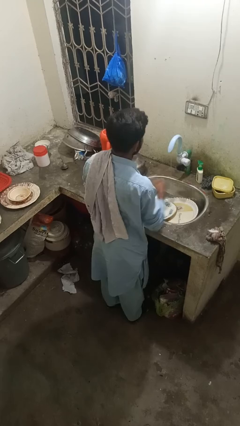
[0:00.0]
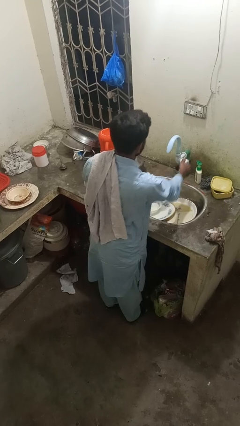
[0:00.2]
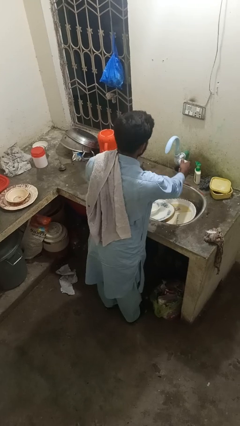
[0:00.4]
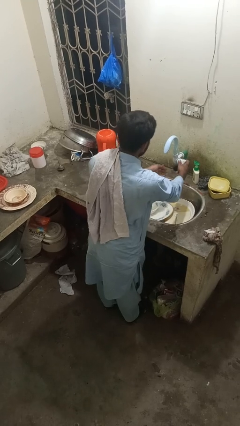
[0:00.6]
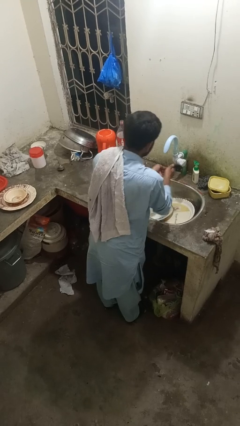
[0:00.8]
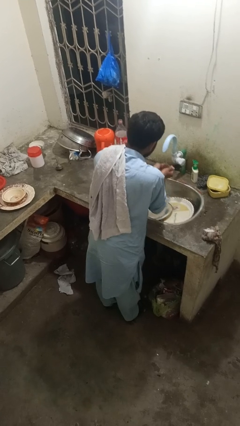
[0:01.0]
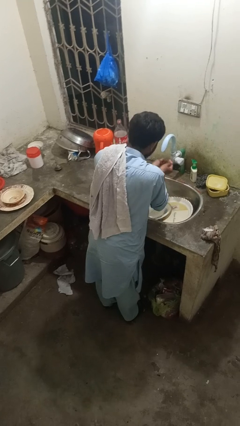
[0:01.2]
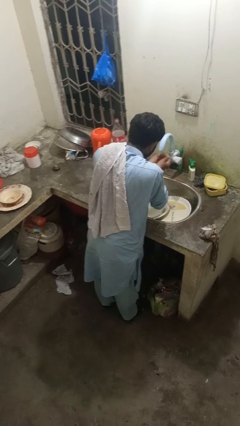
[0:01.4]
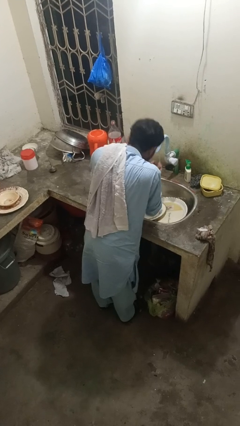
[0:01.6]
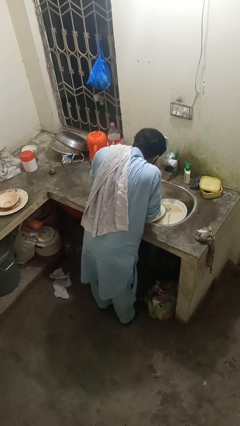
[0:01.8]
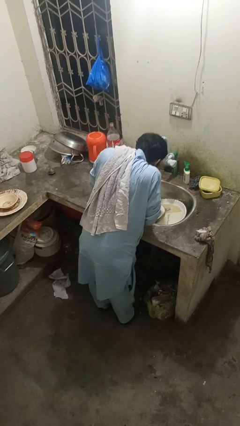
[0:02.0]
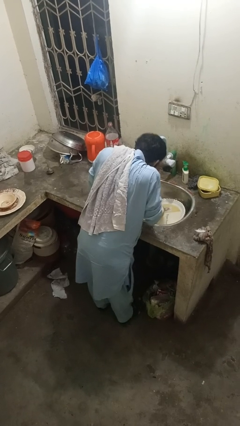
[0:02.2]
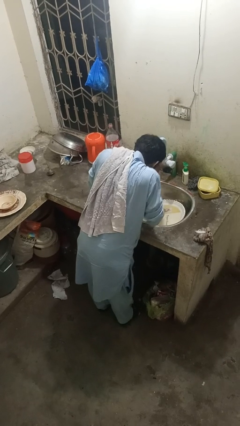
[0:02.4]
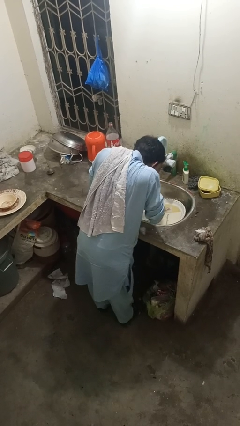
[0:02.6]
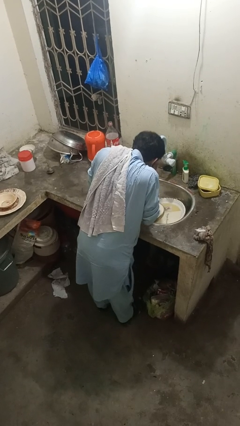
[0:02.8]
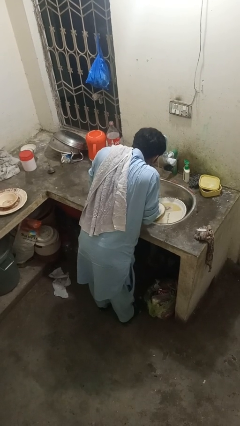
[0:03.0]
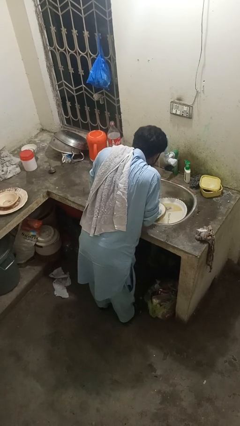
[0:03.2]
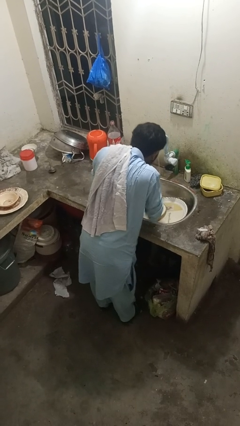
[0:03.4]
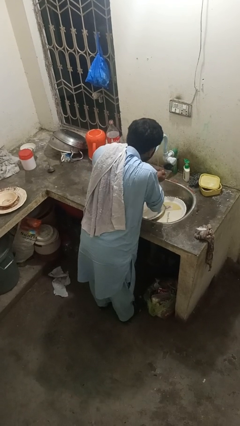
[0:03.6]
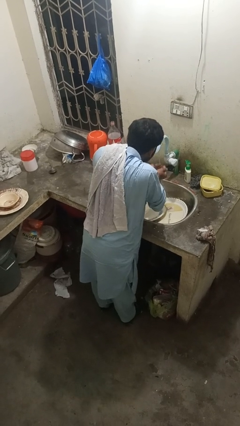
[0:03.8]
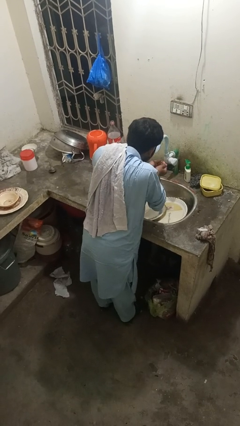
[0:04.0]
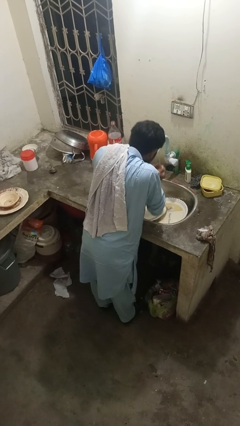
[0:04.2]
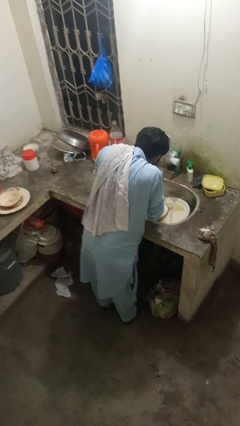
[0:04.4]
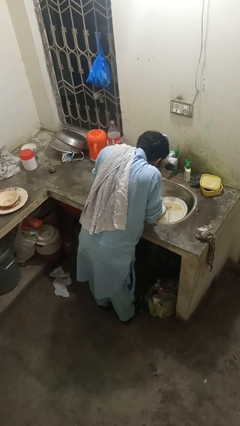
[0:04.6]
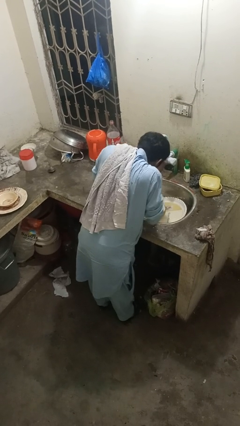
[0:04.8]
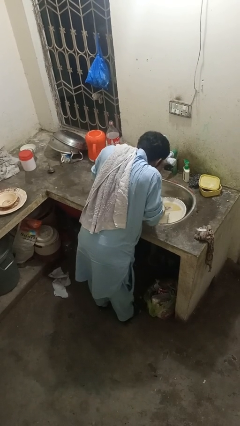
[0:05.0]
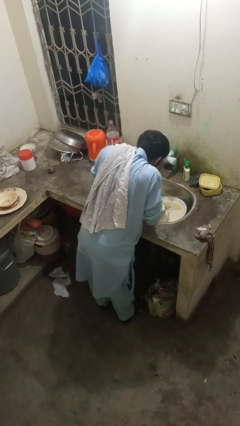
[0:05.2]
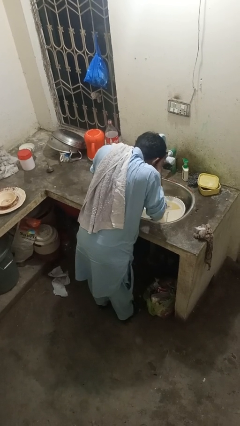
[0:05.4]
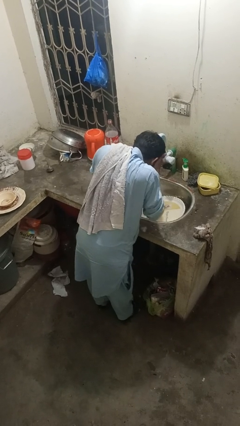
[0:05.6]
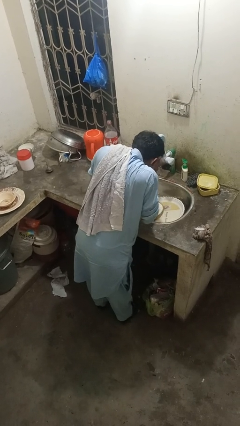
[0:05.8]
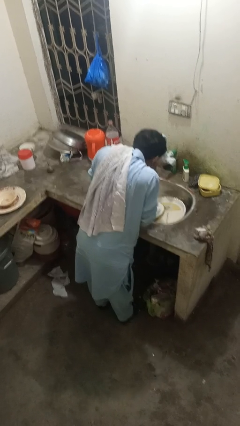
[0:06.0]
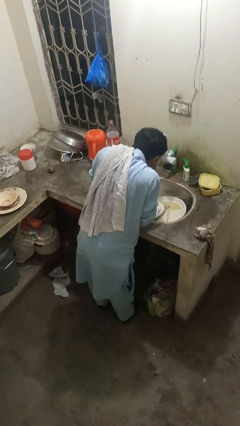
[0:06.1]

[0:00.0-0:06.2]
person washes face

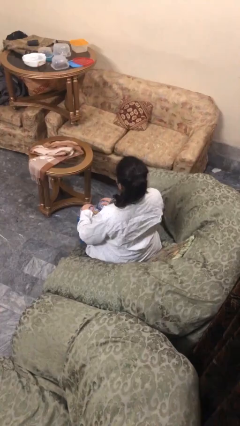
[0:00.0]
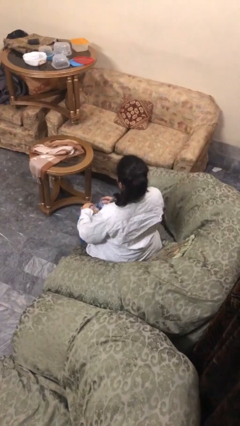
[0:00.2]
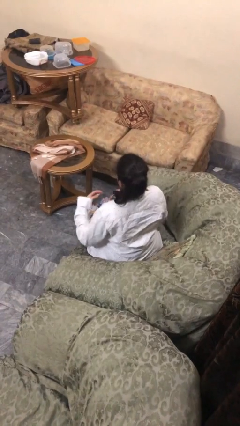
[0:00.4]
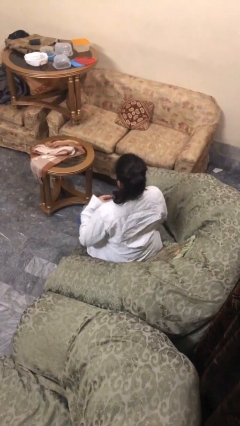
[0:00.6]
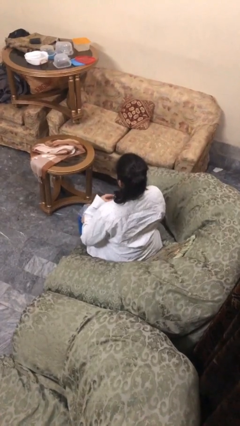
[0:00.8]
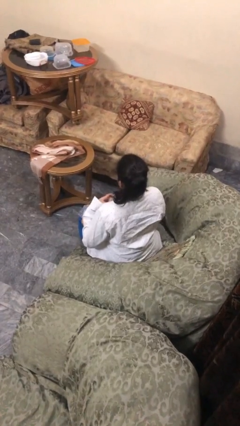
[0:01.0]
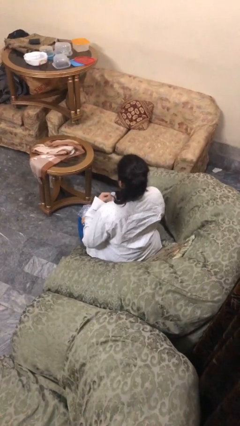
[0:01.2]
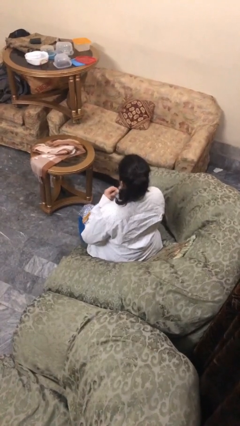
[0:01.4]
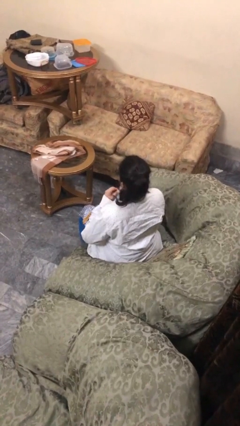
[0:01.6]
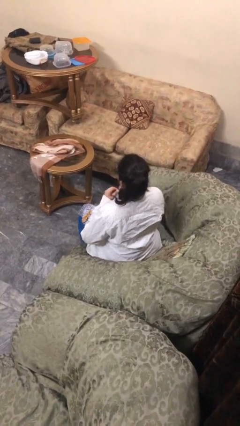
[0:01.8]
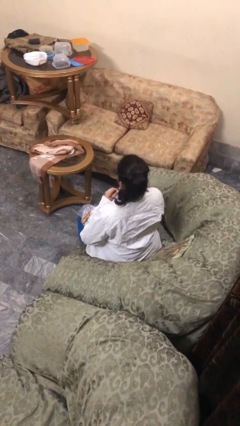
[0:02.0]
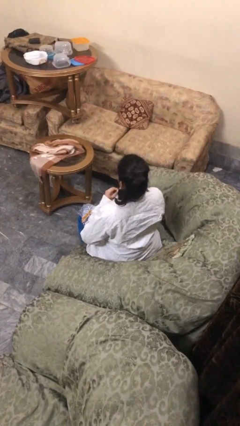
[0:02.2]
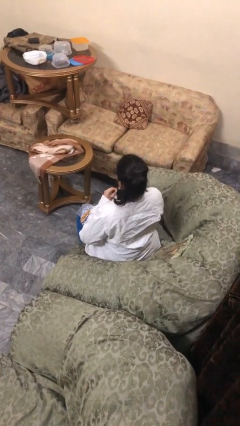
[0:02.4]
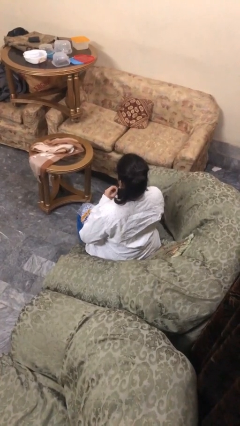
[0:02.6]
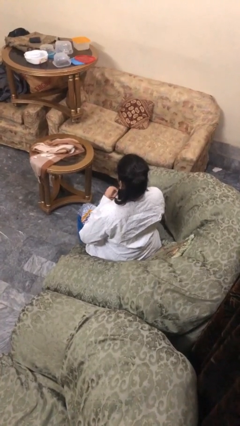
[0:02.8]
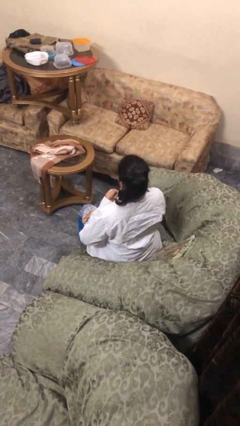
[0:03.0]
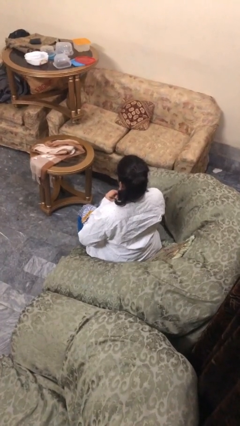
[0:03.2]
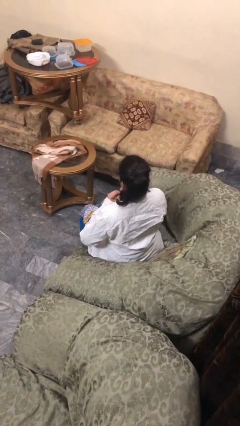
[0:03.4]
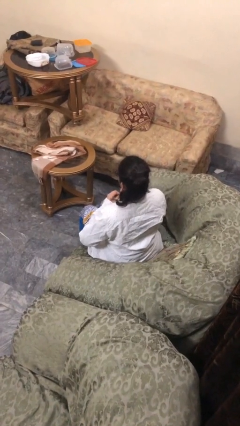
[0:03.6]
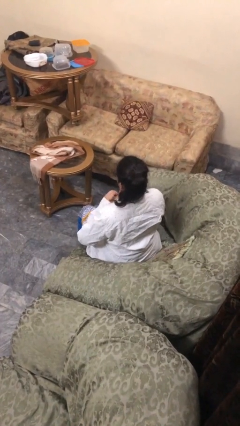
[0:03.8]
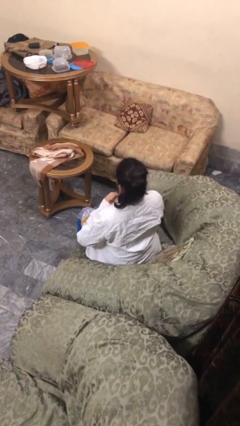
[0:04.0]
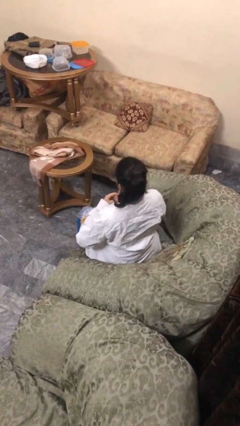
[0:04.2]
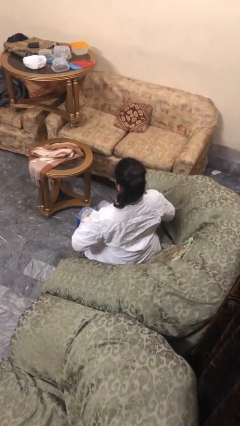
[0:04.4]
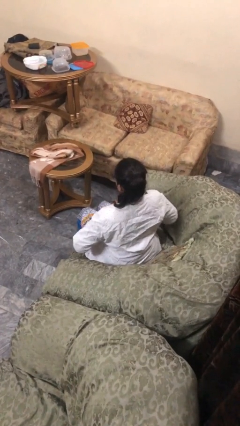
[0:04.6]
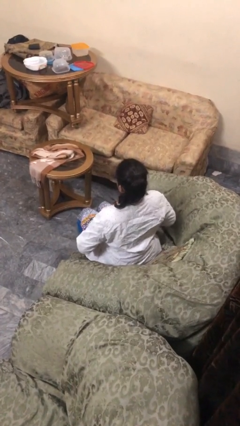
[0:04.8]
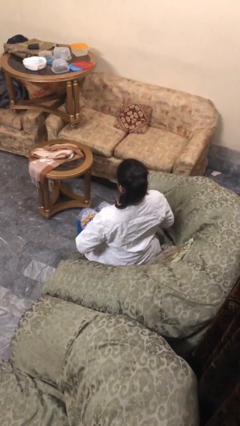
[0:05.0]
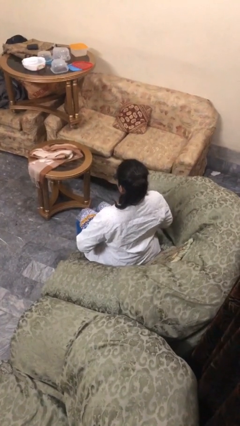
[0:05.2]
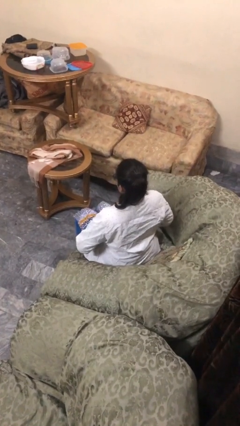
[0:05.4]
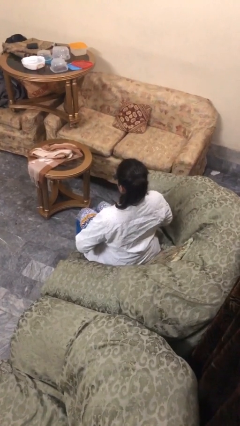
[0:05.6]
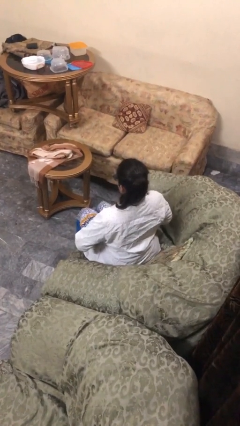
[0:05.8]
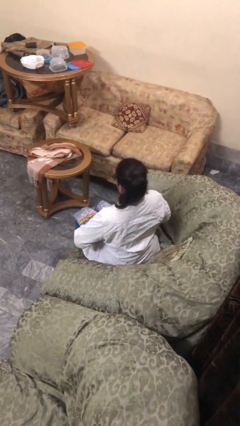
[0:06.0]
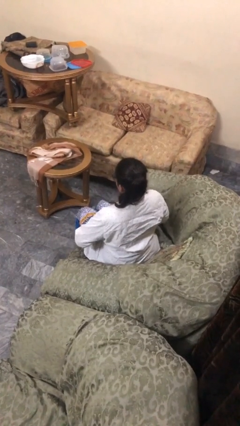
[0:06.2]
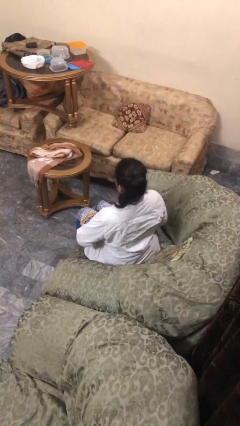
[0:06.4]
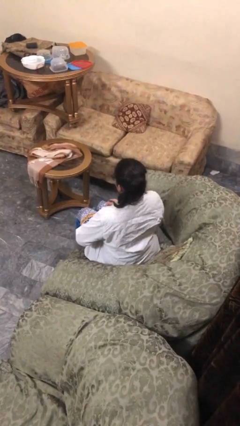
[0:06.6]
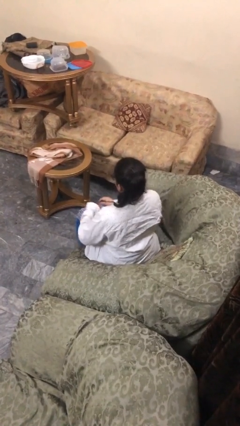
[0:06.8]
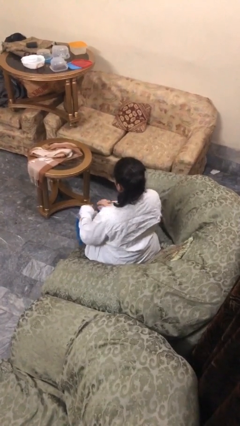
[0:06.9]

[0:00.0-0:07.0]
person buttons shirt

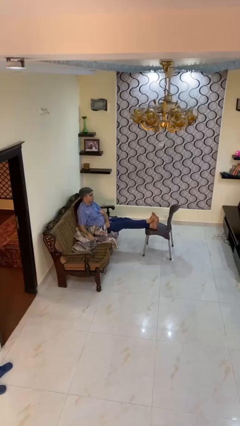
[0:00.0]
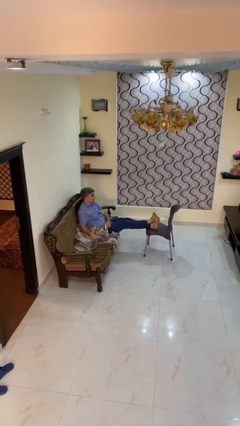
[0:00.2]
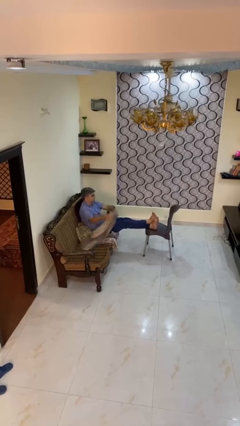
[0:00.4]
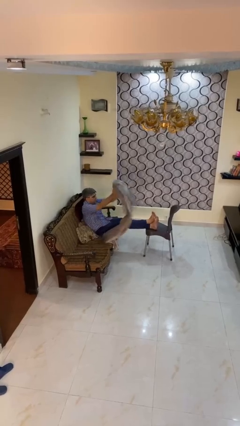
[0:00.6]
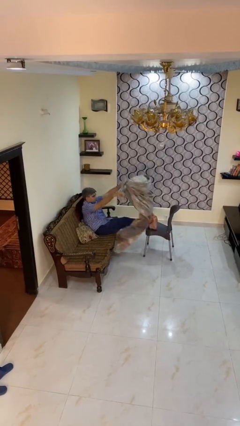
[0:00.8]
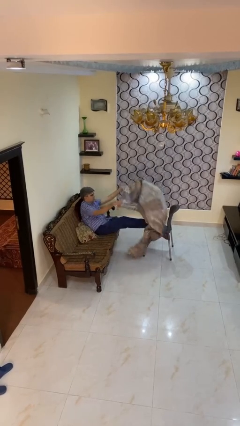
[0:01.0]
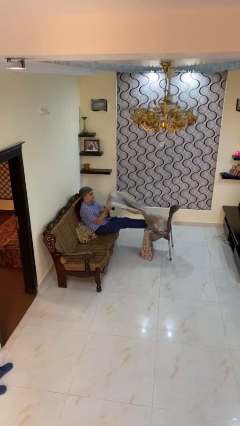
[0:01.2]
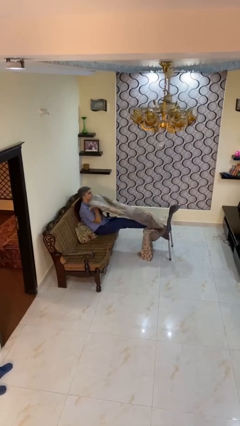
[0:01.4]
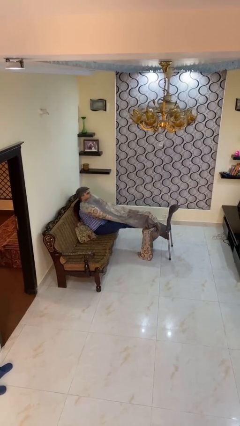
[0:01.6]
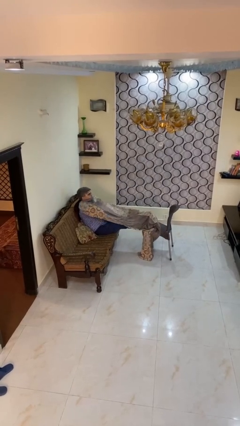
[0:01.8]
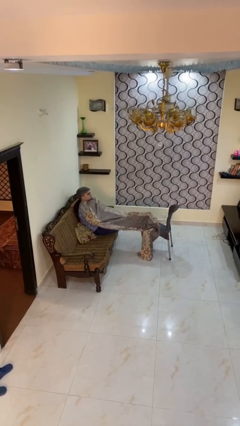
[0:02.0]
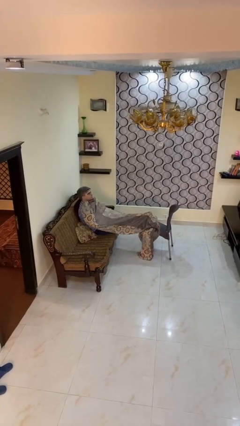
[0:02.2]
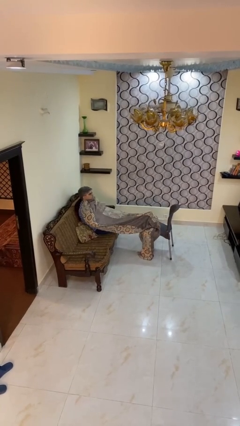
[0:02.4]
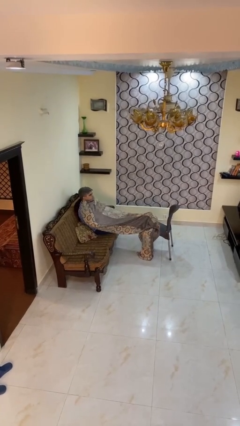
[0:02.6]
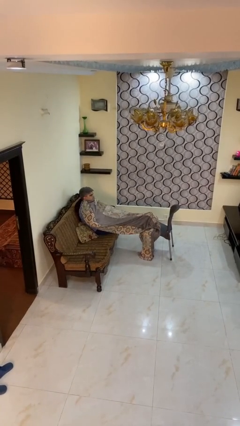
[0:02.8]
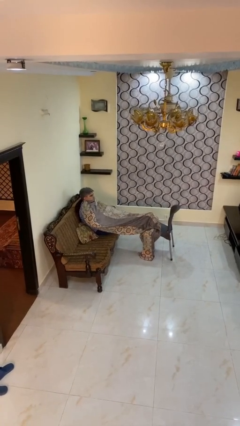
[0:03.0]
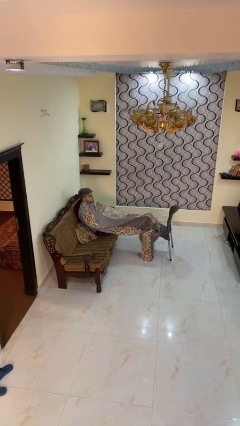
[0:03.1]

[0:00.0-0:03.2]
person covers with blanket

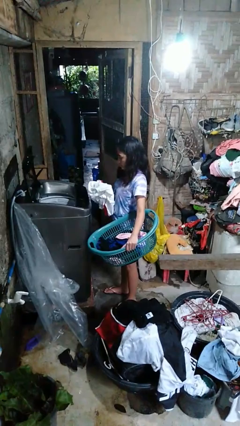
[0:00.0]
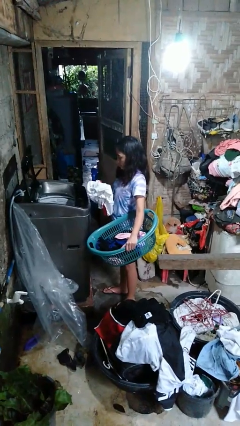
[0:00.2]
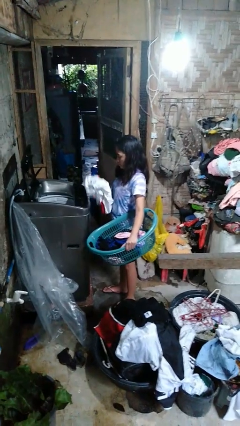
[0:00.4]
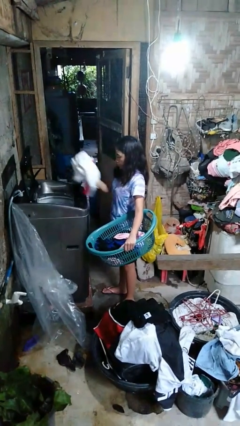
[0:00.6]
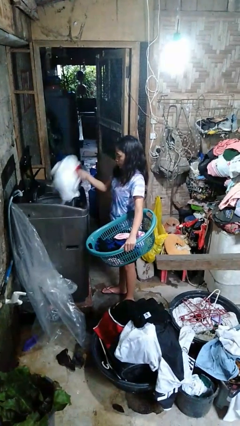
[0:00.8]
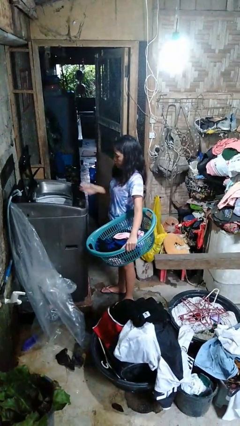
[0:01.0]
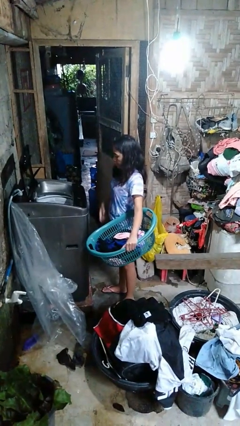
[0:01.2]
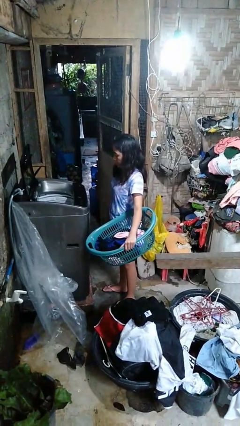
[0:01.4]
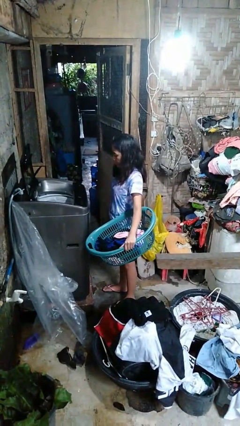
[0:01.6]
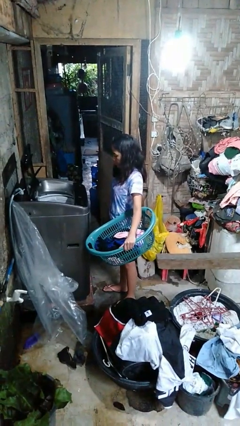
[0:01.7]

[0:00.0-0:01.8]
person loads clotheswasher
